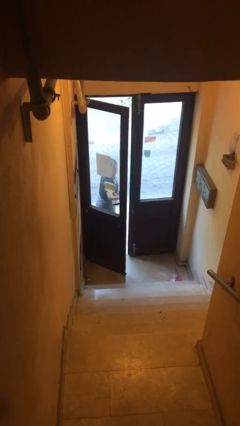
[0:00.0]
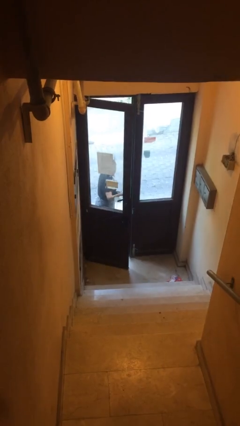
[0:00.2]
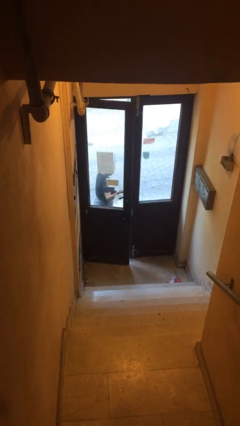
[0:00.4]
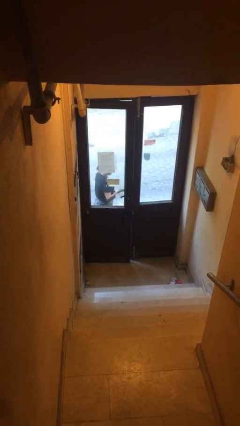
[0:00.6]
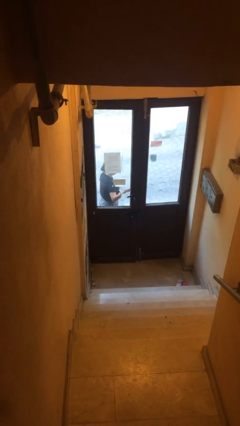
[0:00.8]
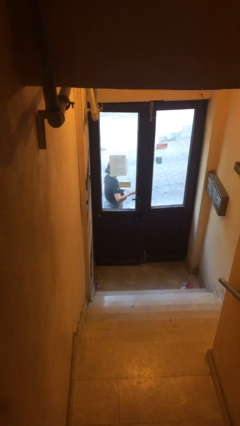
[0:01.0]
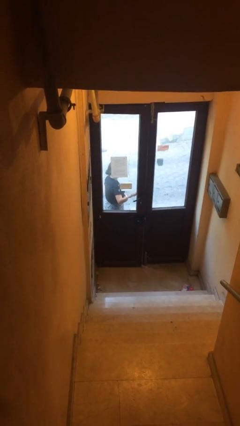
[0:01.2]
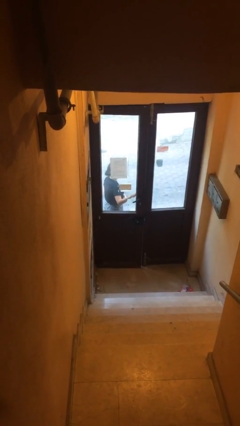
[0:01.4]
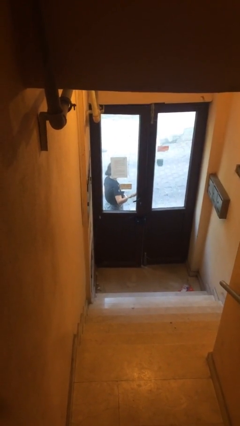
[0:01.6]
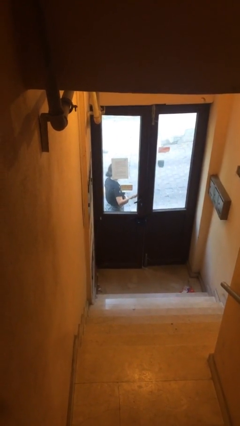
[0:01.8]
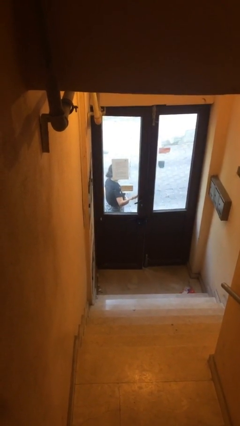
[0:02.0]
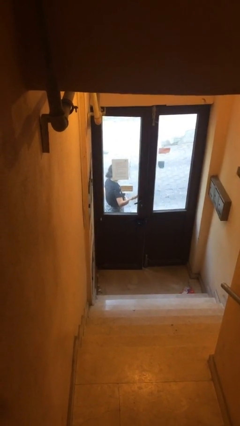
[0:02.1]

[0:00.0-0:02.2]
person closes facility door

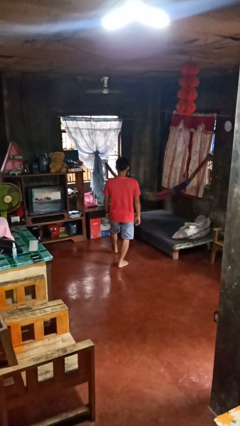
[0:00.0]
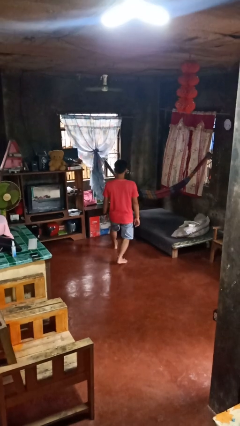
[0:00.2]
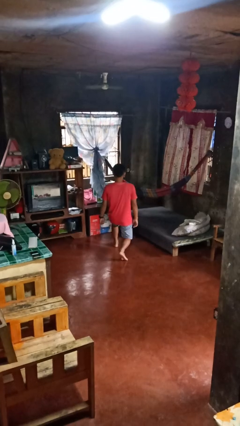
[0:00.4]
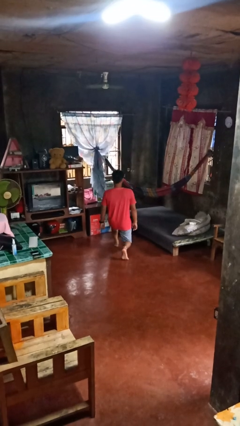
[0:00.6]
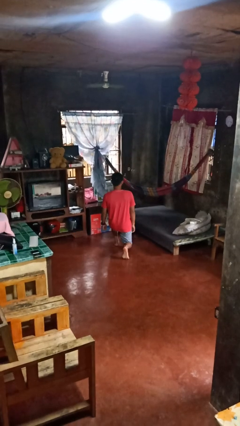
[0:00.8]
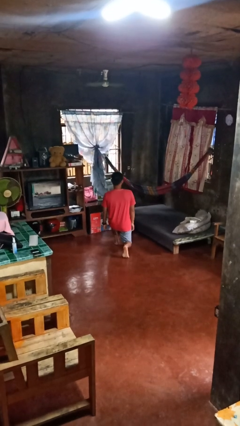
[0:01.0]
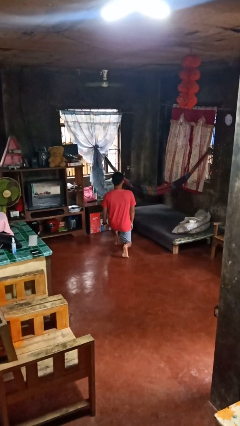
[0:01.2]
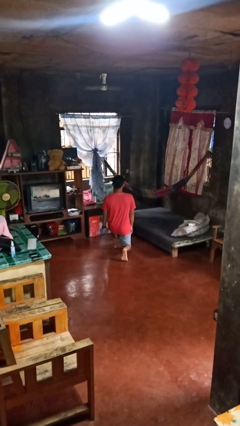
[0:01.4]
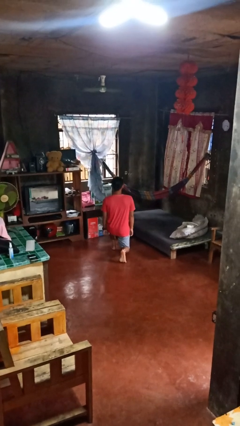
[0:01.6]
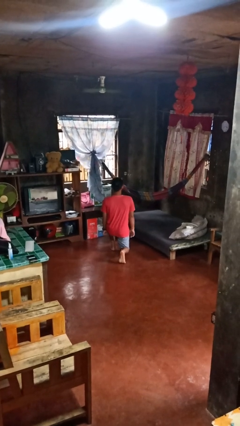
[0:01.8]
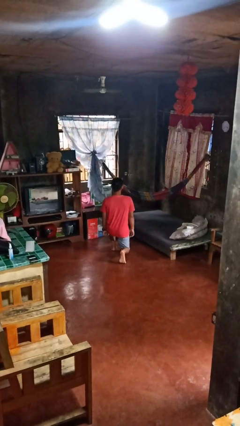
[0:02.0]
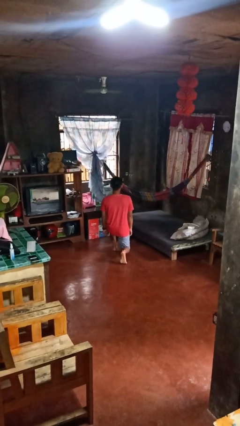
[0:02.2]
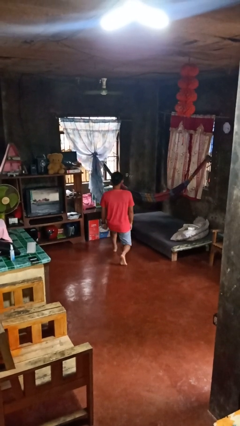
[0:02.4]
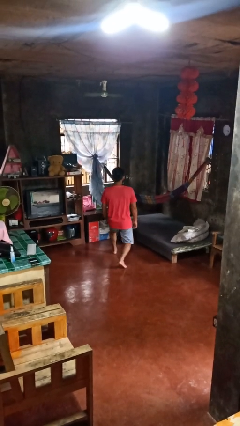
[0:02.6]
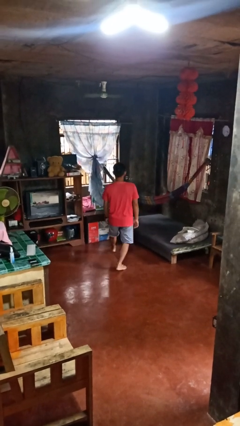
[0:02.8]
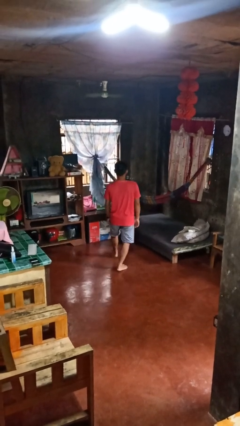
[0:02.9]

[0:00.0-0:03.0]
person exercises with lunges

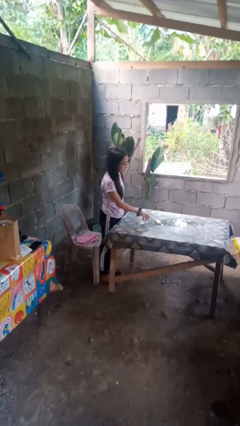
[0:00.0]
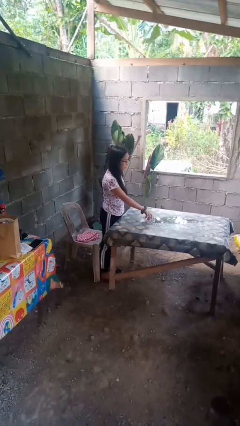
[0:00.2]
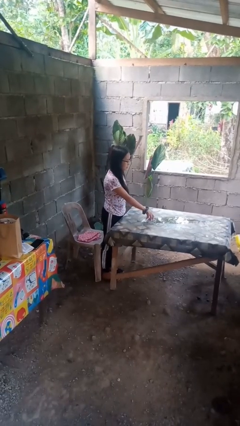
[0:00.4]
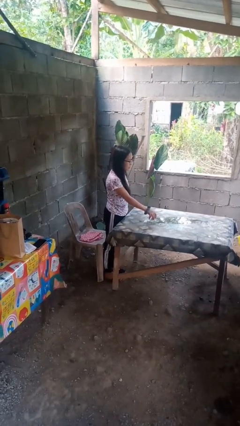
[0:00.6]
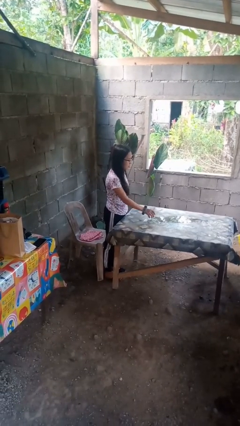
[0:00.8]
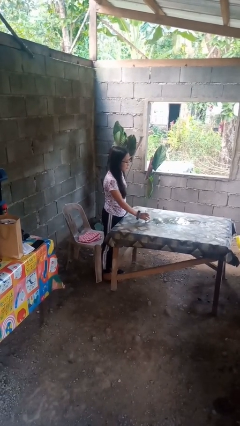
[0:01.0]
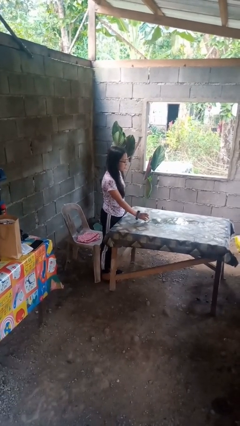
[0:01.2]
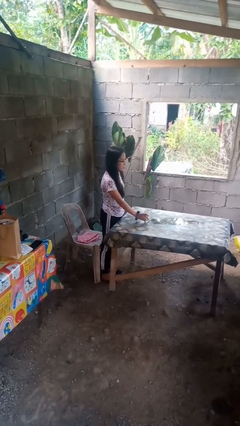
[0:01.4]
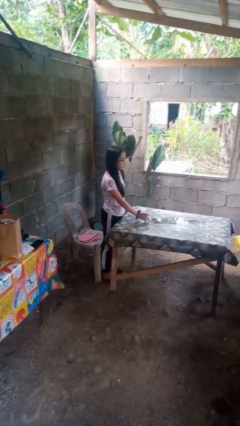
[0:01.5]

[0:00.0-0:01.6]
person sets upright glass

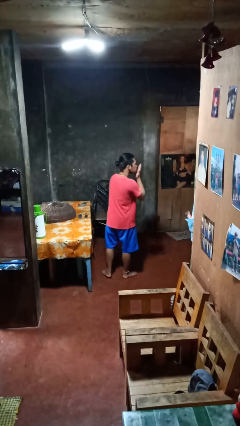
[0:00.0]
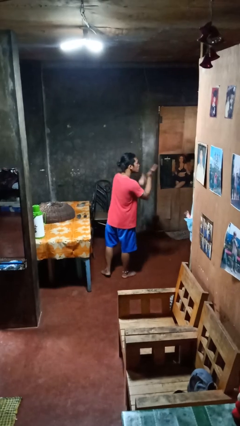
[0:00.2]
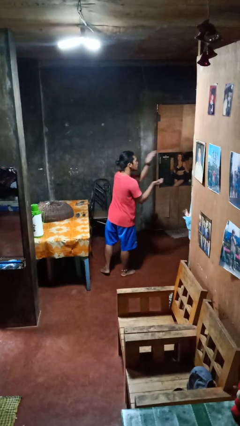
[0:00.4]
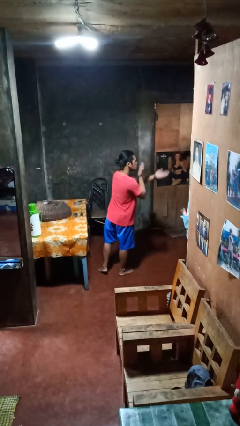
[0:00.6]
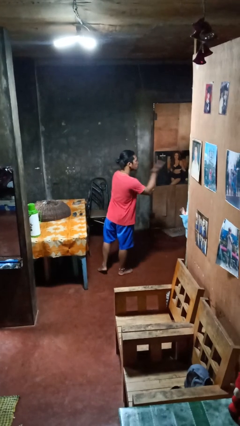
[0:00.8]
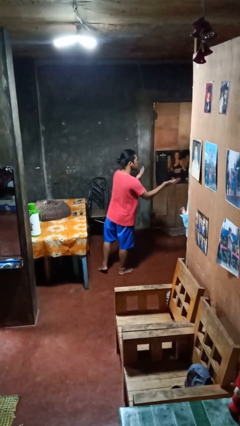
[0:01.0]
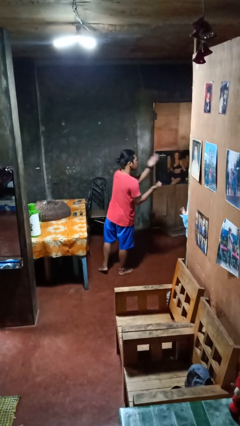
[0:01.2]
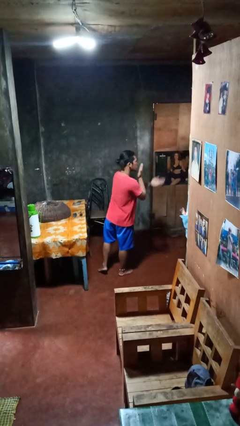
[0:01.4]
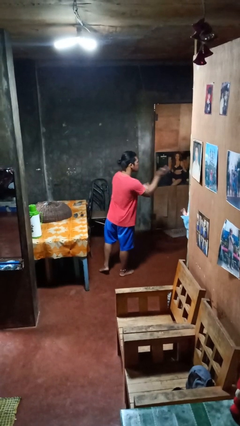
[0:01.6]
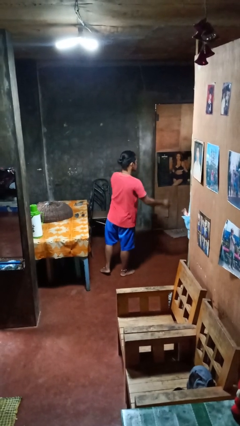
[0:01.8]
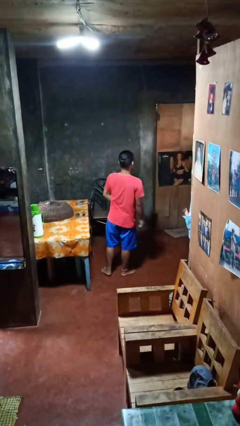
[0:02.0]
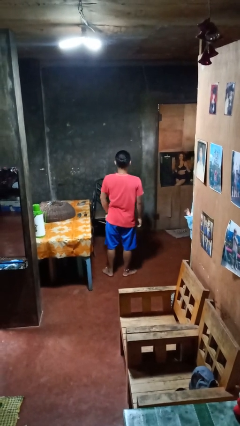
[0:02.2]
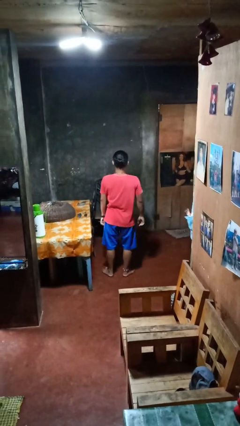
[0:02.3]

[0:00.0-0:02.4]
person gestures blow kiss

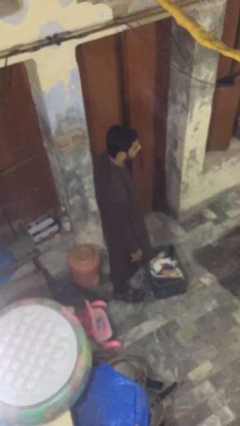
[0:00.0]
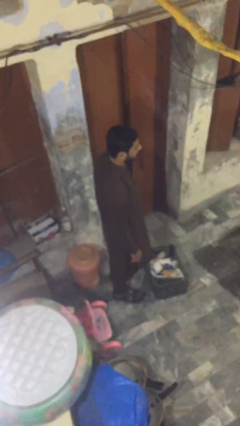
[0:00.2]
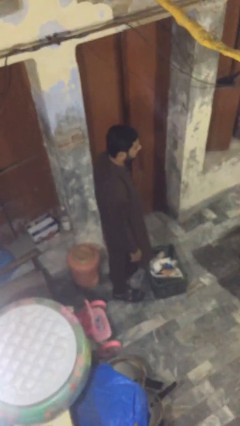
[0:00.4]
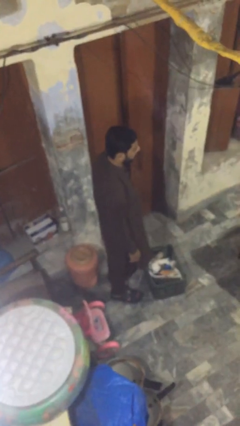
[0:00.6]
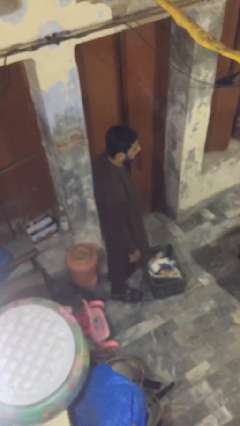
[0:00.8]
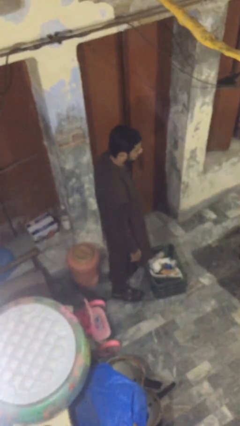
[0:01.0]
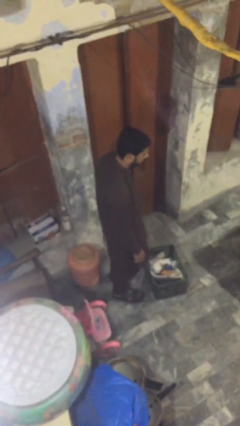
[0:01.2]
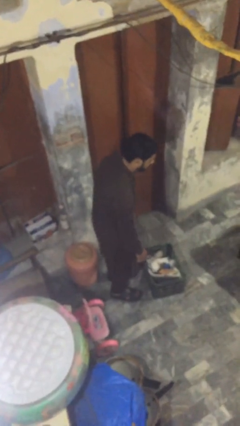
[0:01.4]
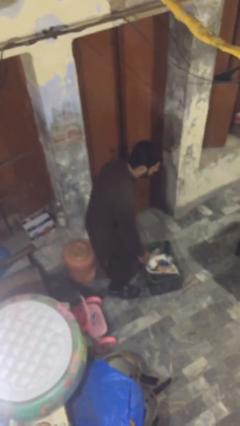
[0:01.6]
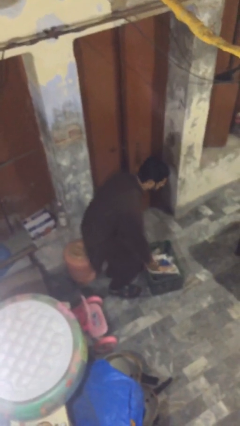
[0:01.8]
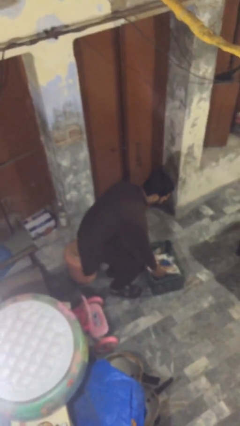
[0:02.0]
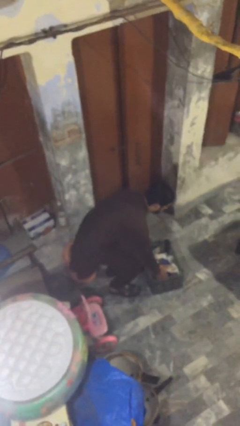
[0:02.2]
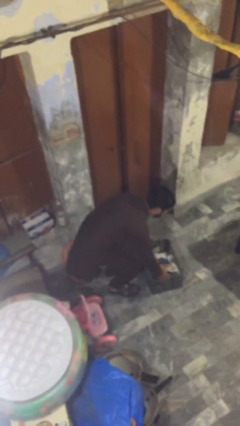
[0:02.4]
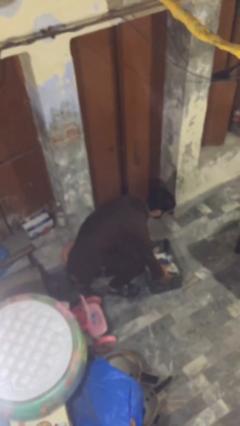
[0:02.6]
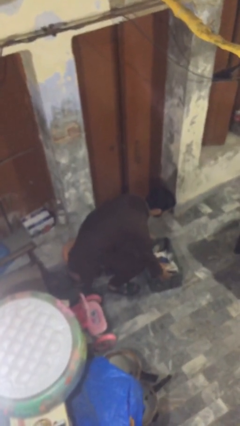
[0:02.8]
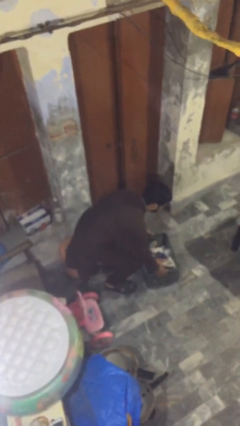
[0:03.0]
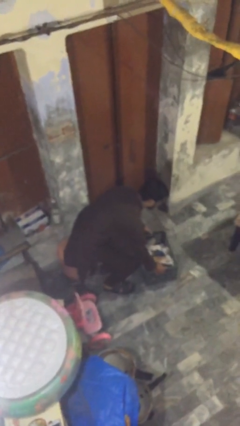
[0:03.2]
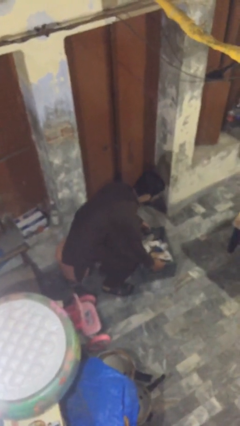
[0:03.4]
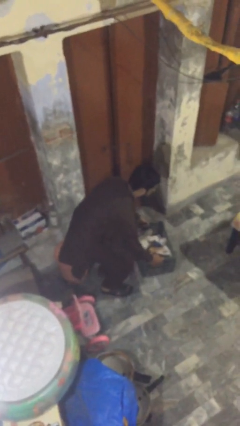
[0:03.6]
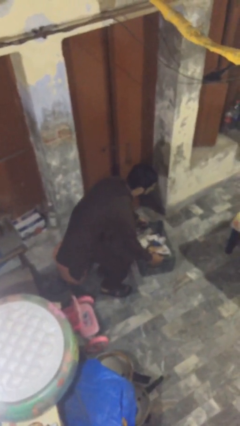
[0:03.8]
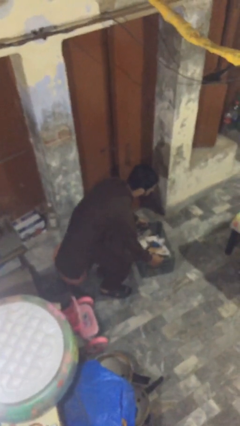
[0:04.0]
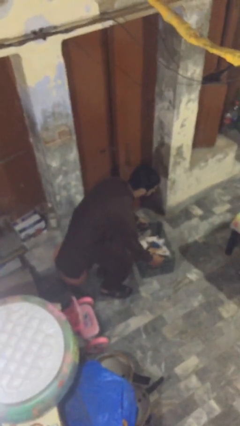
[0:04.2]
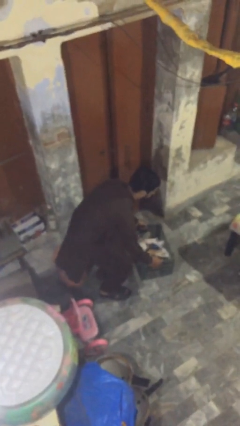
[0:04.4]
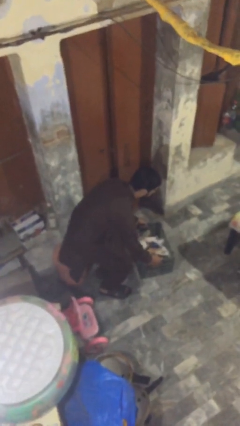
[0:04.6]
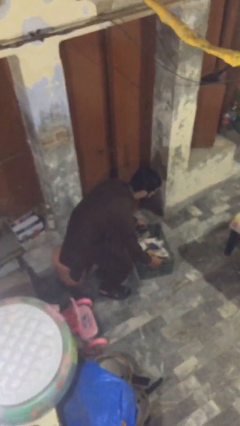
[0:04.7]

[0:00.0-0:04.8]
person picks up object from floor

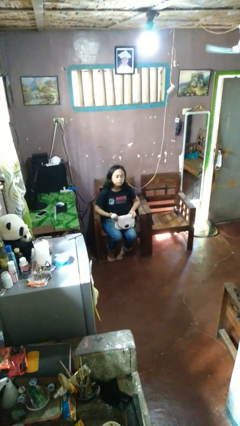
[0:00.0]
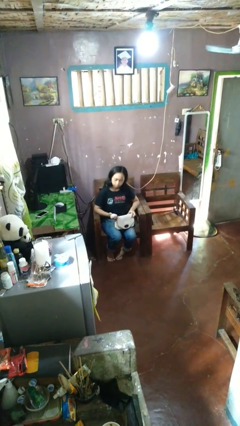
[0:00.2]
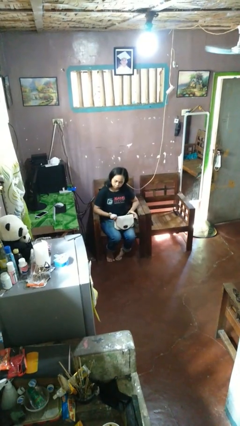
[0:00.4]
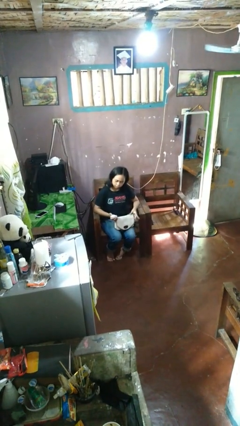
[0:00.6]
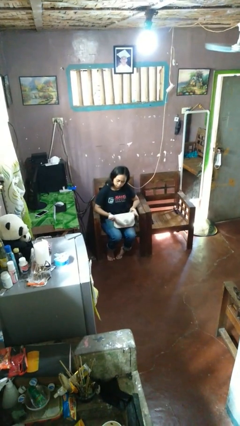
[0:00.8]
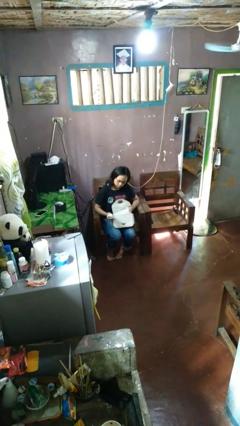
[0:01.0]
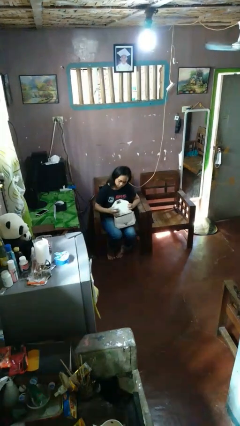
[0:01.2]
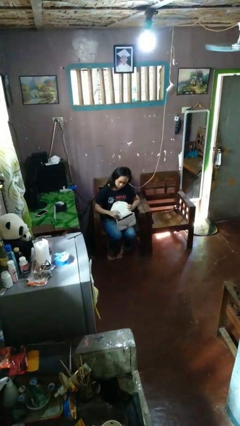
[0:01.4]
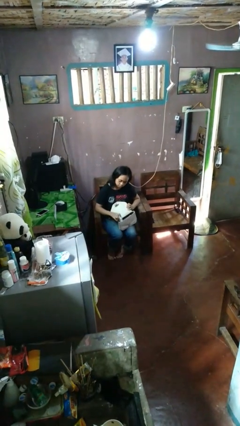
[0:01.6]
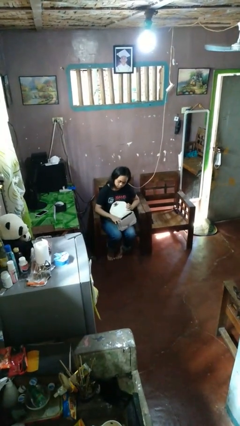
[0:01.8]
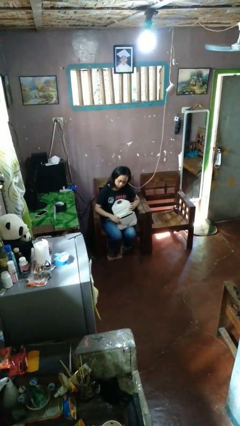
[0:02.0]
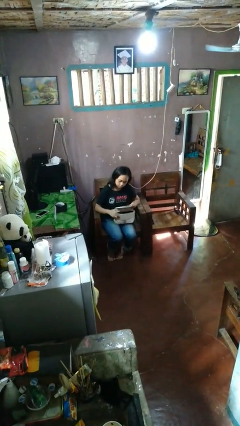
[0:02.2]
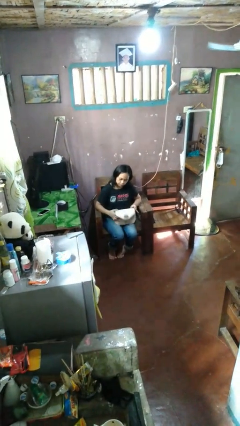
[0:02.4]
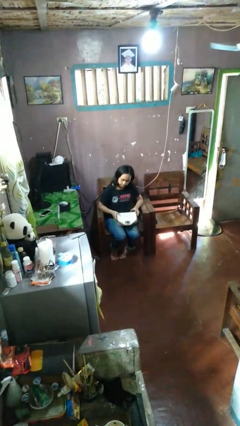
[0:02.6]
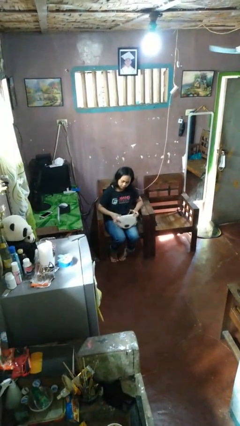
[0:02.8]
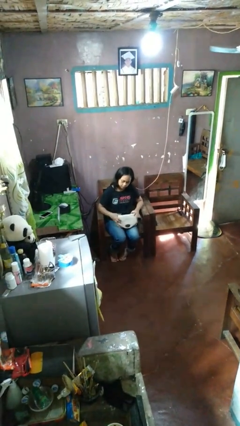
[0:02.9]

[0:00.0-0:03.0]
person puts object into purse

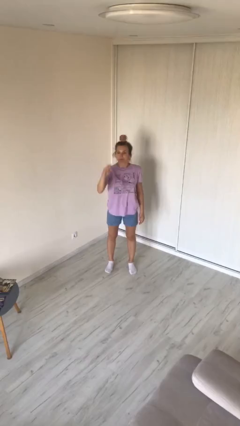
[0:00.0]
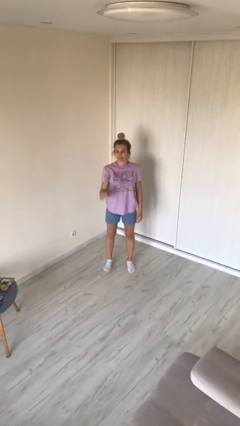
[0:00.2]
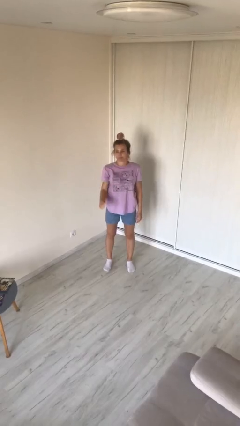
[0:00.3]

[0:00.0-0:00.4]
person gestures lower hand
